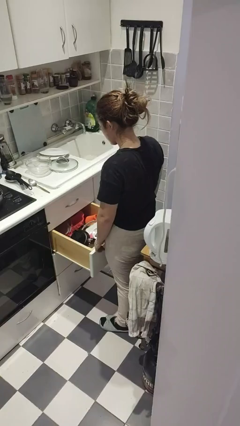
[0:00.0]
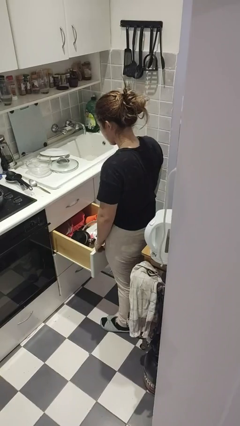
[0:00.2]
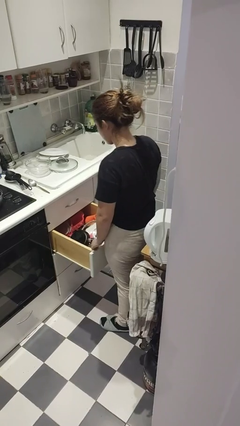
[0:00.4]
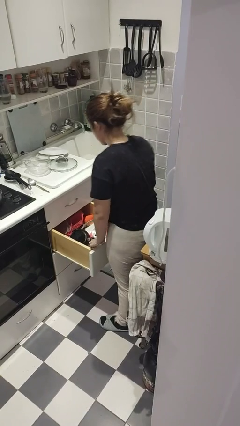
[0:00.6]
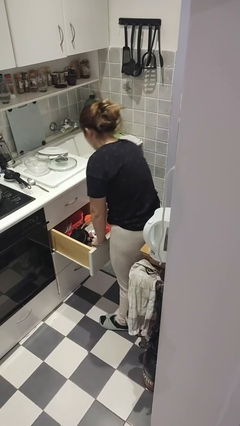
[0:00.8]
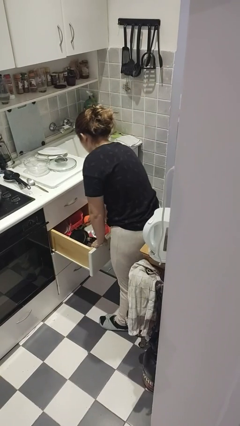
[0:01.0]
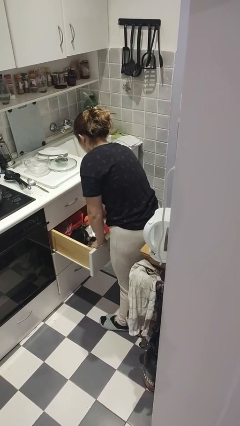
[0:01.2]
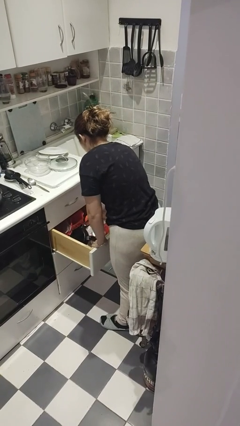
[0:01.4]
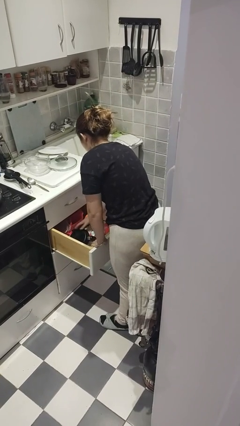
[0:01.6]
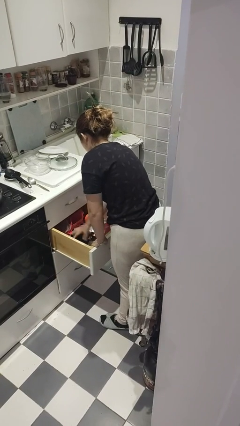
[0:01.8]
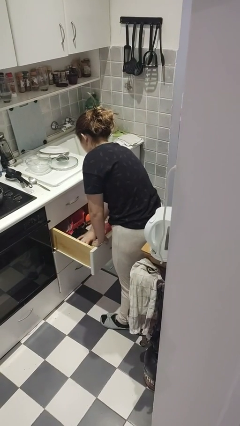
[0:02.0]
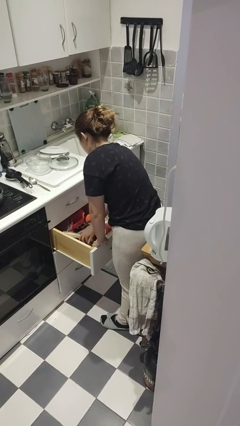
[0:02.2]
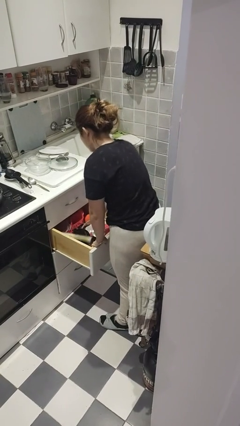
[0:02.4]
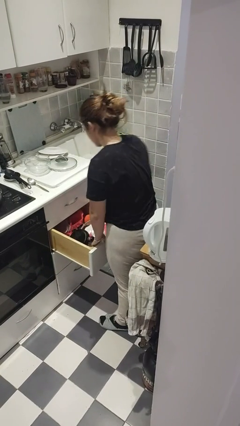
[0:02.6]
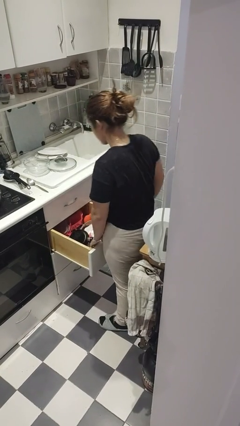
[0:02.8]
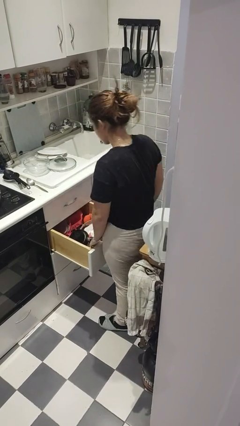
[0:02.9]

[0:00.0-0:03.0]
person searches in kitchen drawer

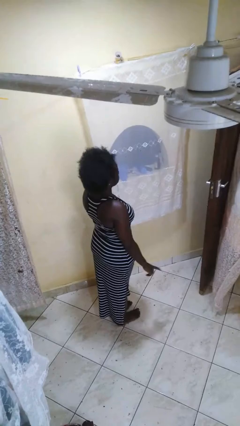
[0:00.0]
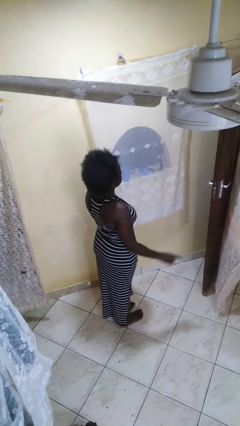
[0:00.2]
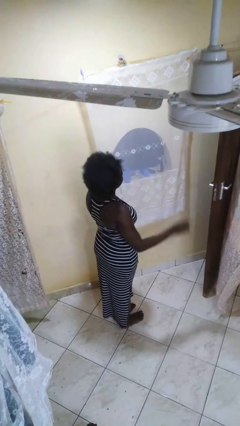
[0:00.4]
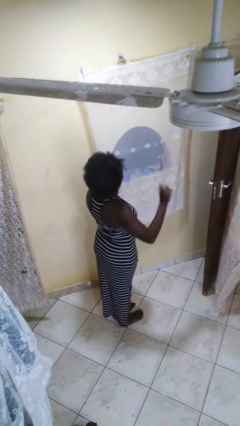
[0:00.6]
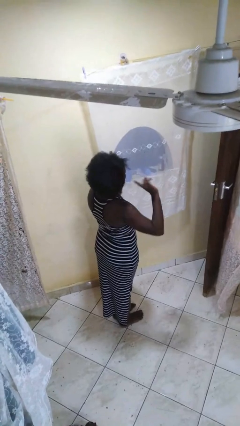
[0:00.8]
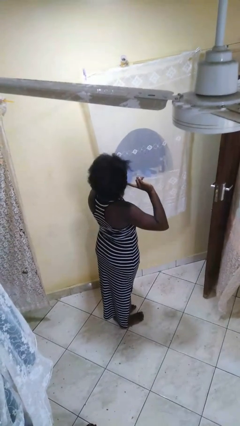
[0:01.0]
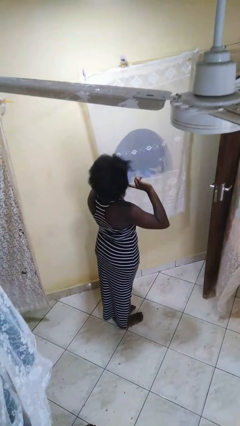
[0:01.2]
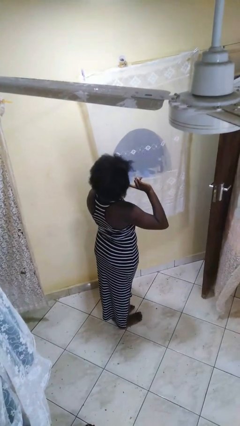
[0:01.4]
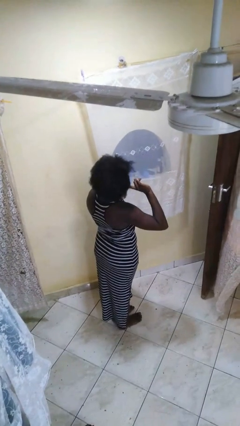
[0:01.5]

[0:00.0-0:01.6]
person gestures listen closely

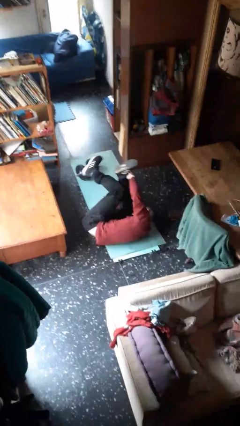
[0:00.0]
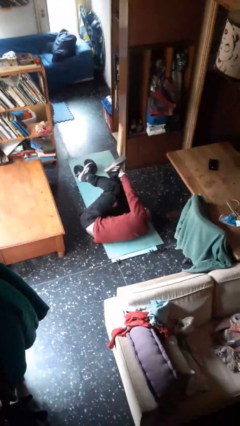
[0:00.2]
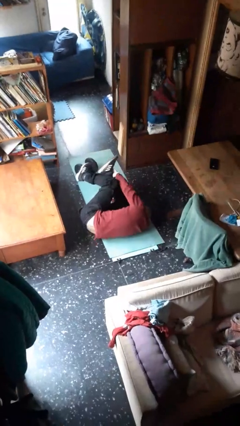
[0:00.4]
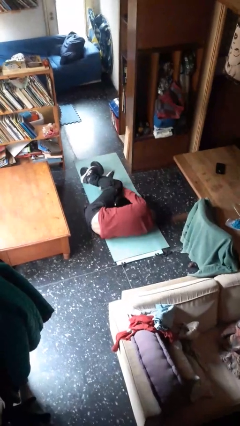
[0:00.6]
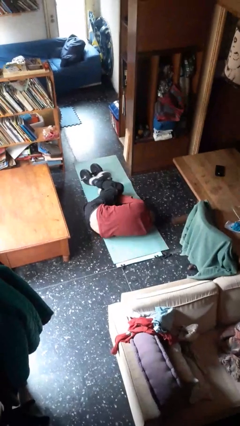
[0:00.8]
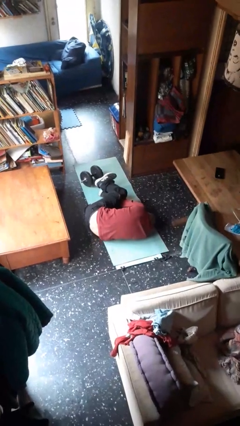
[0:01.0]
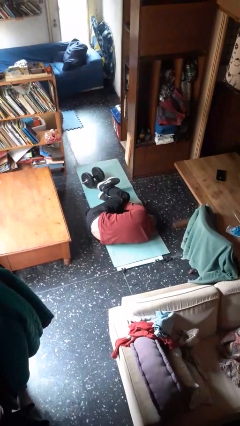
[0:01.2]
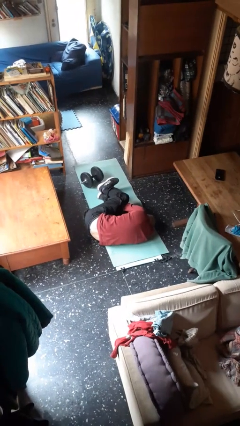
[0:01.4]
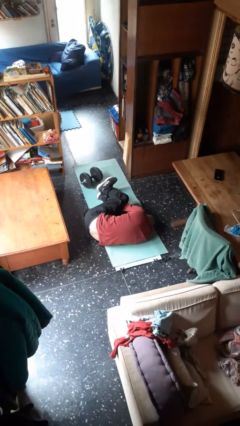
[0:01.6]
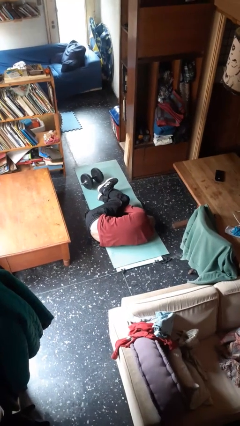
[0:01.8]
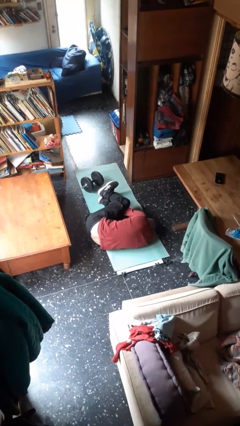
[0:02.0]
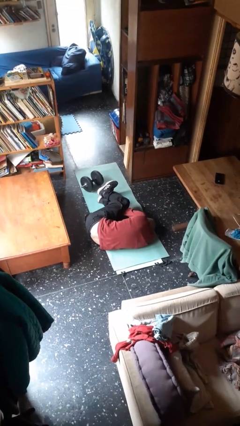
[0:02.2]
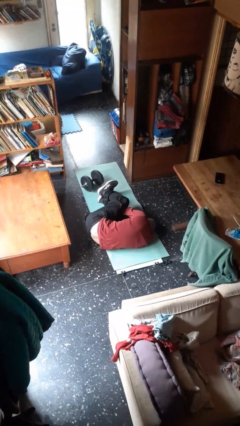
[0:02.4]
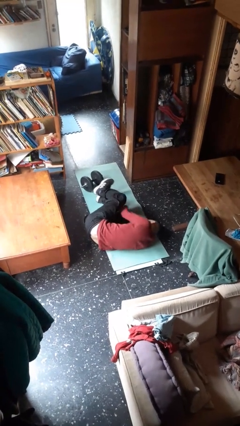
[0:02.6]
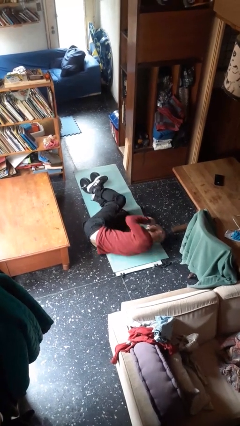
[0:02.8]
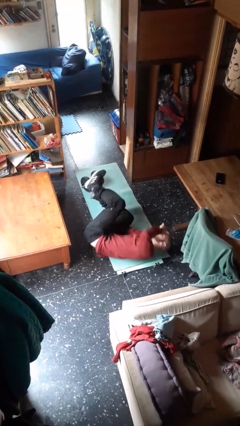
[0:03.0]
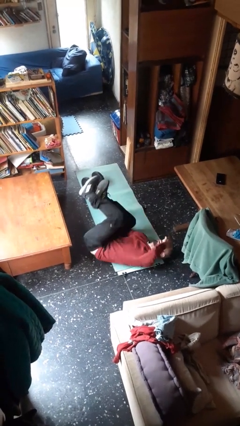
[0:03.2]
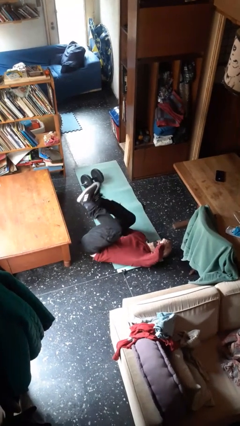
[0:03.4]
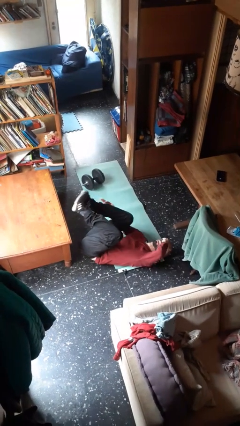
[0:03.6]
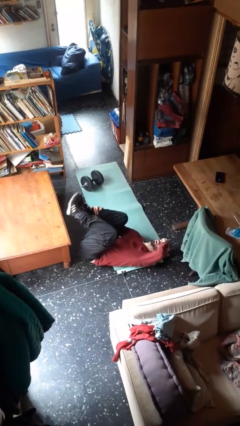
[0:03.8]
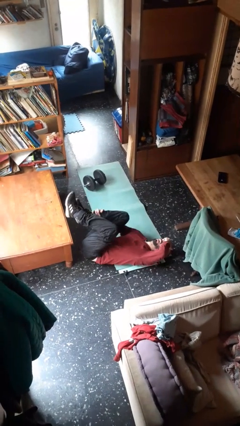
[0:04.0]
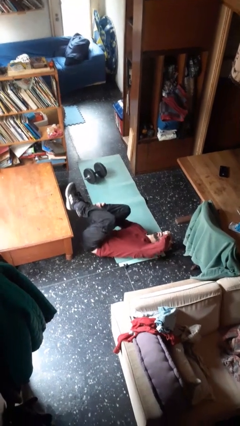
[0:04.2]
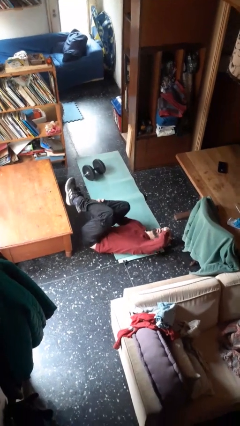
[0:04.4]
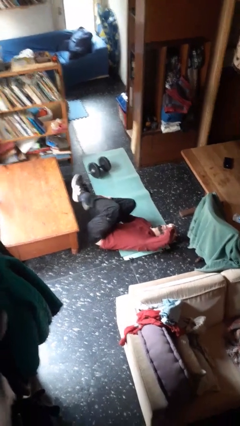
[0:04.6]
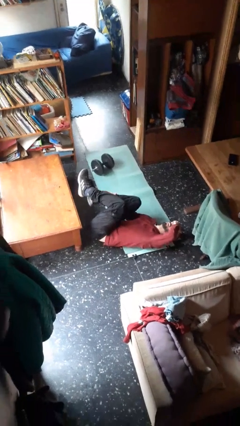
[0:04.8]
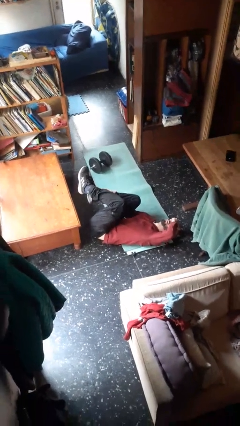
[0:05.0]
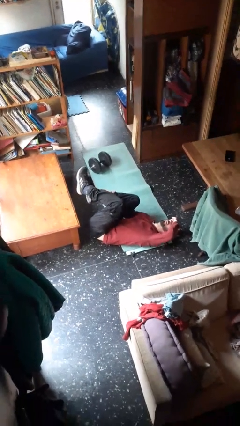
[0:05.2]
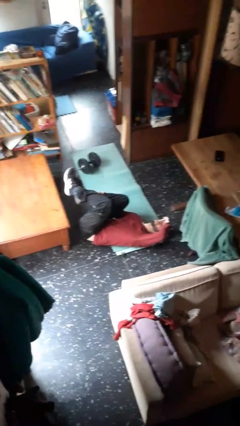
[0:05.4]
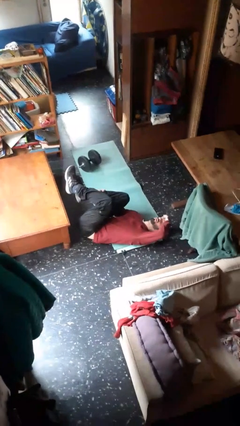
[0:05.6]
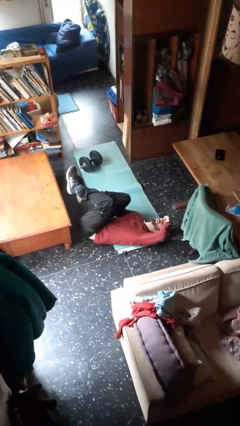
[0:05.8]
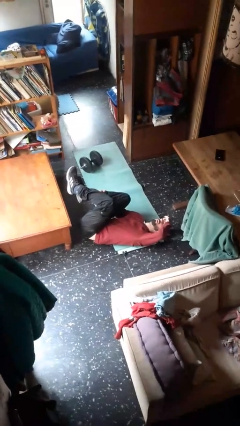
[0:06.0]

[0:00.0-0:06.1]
person lies down on floor

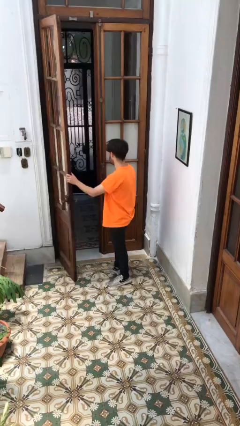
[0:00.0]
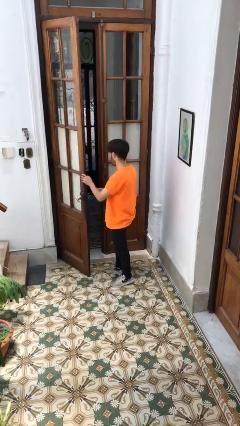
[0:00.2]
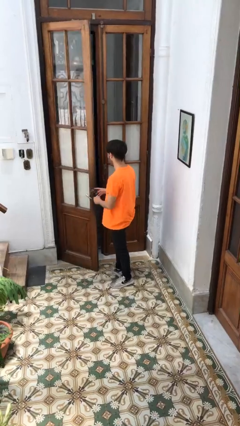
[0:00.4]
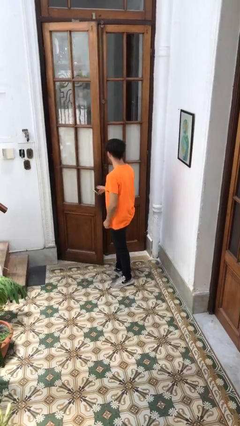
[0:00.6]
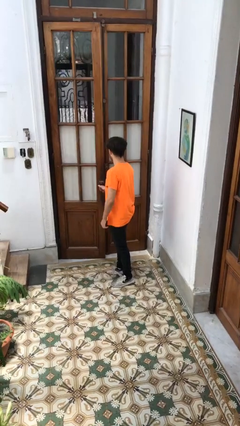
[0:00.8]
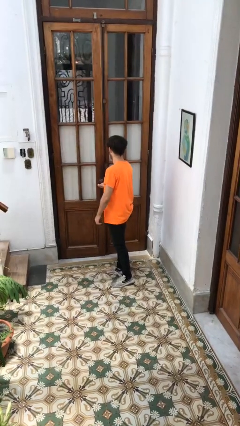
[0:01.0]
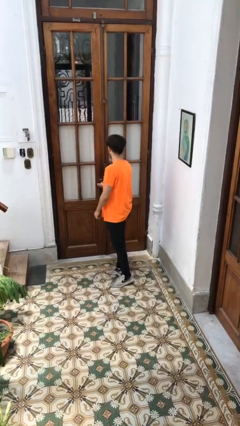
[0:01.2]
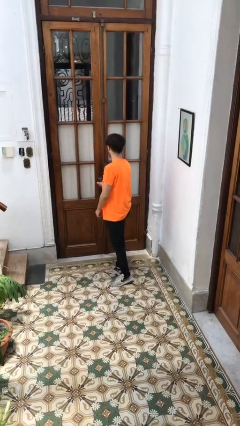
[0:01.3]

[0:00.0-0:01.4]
person closes facility door

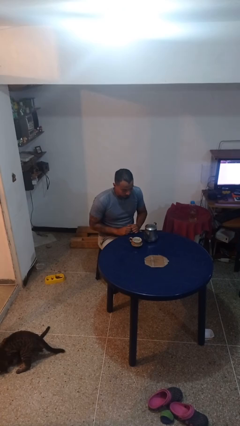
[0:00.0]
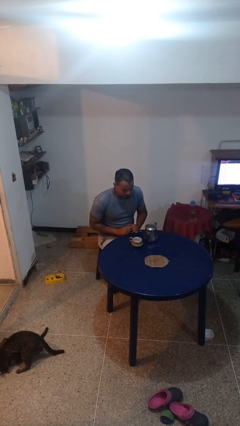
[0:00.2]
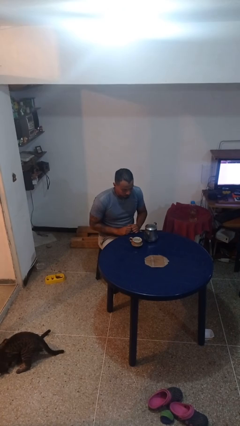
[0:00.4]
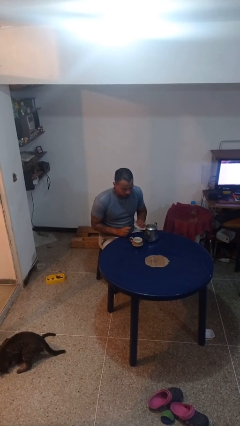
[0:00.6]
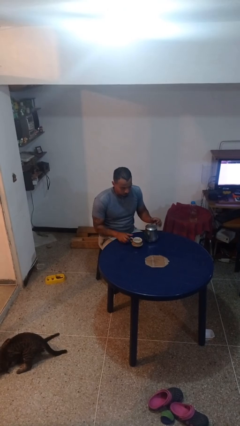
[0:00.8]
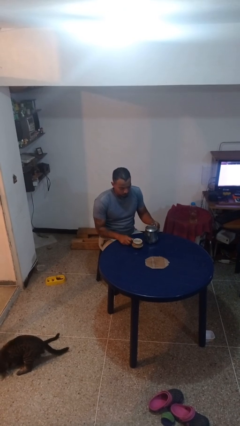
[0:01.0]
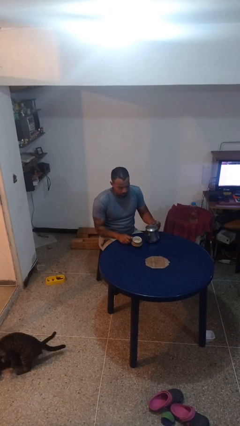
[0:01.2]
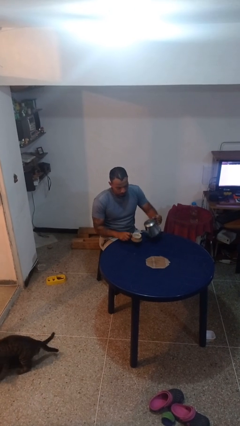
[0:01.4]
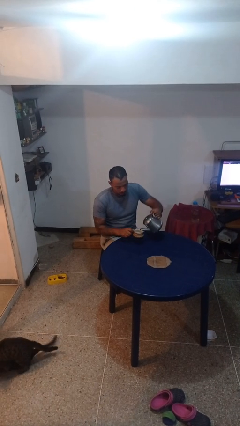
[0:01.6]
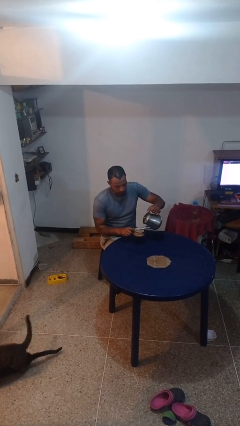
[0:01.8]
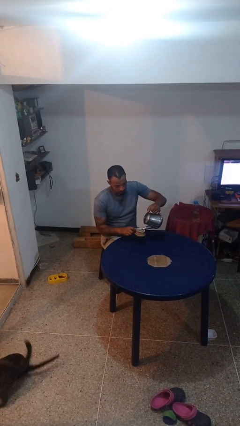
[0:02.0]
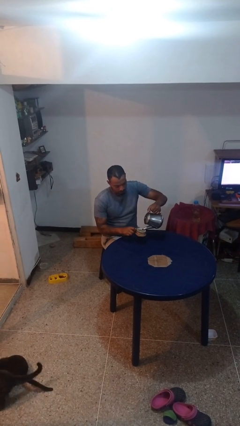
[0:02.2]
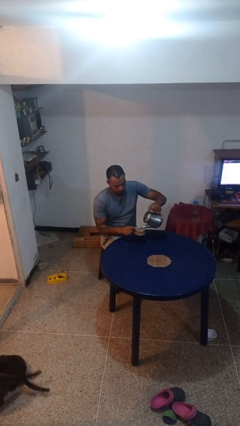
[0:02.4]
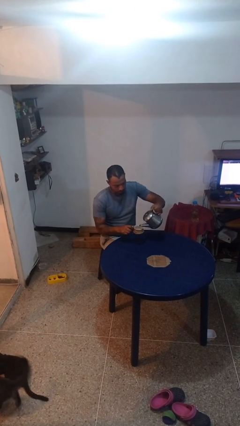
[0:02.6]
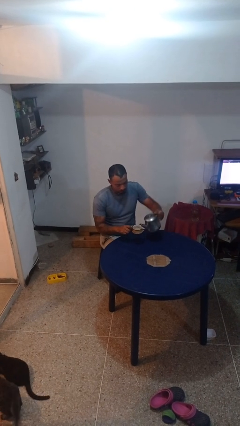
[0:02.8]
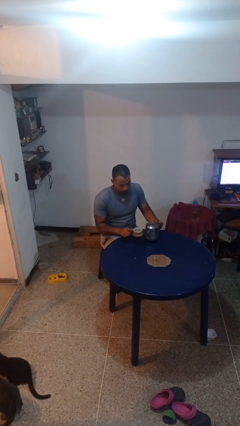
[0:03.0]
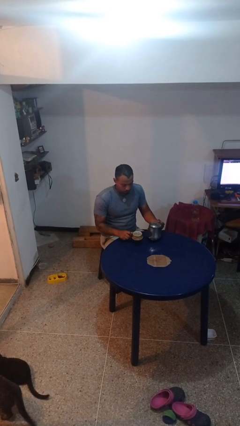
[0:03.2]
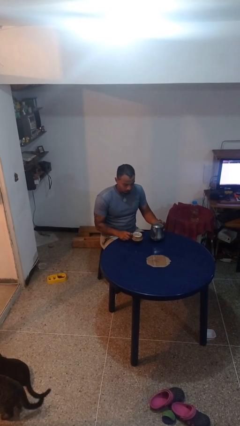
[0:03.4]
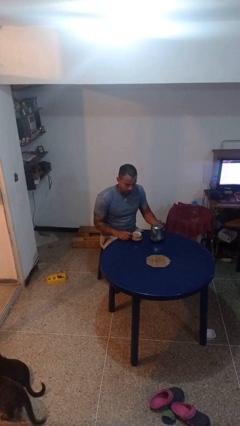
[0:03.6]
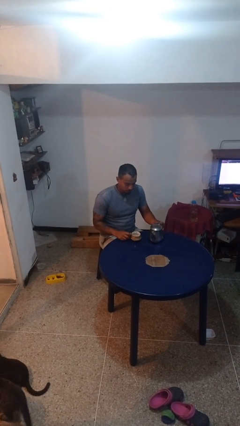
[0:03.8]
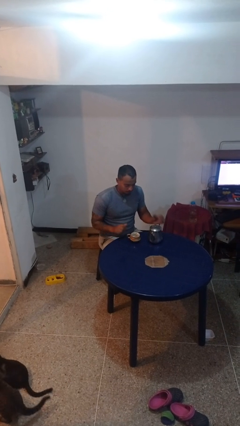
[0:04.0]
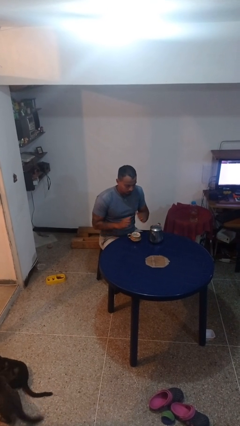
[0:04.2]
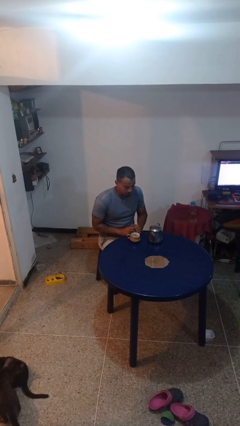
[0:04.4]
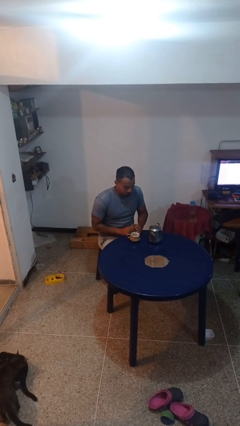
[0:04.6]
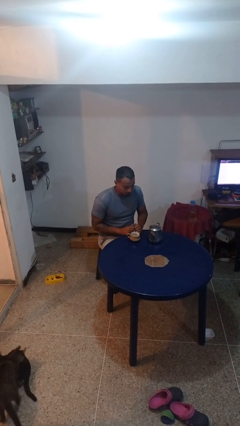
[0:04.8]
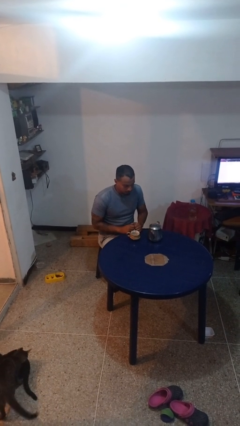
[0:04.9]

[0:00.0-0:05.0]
person pours coffee into mug

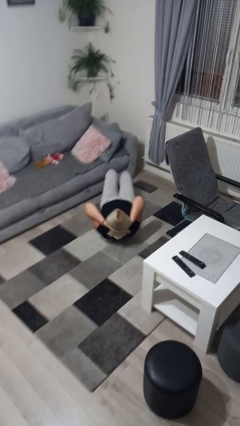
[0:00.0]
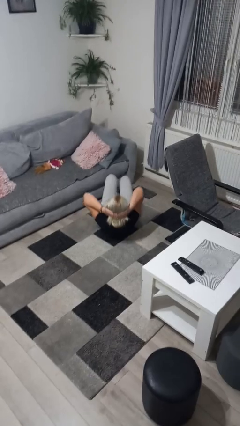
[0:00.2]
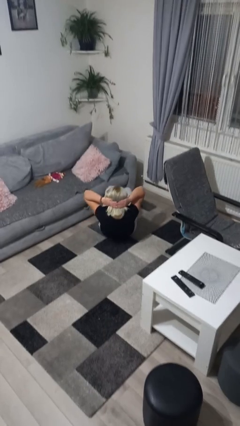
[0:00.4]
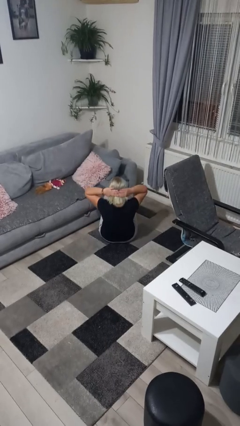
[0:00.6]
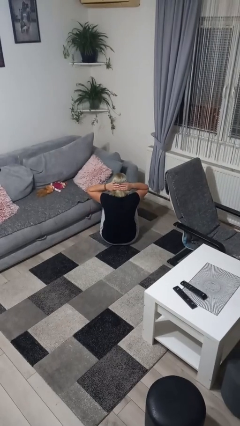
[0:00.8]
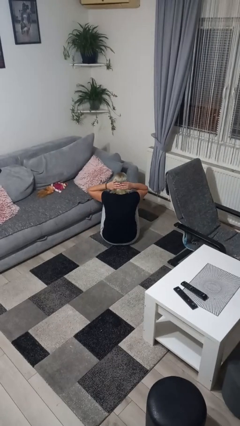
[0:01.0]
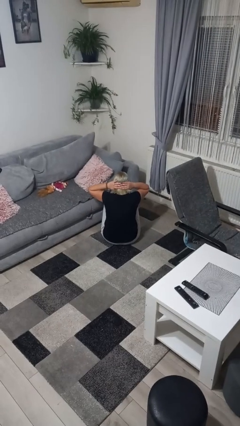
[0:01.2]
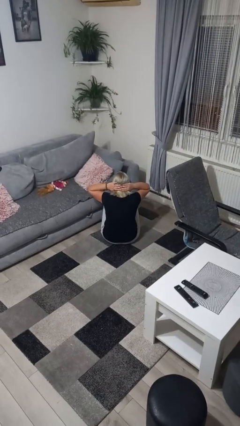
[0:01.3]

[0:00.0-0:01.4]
person exercises with situp
